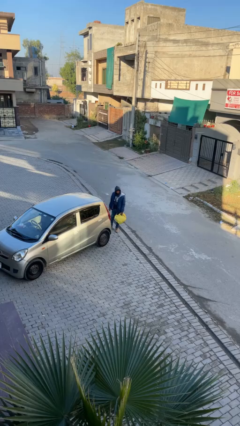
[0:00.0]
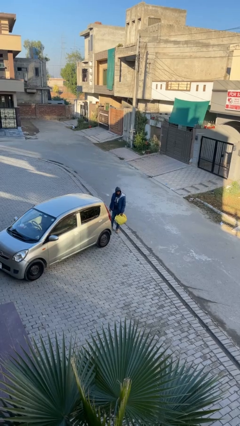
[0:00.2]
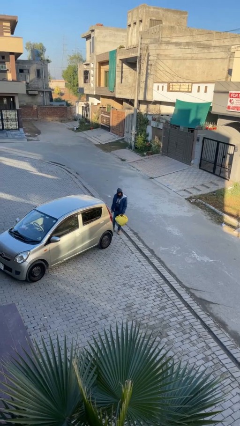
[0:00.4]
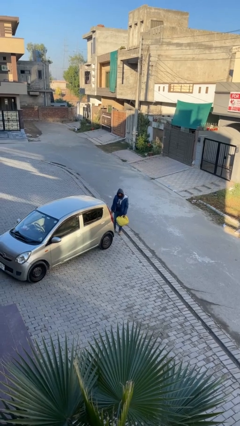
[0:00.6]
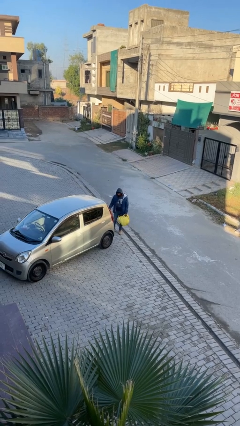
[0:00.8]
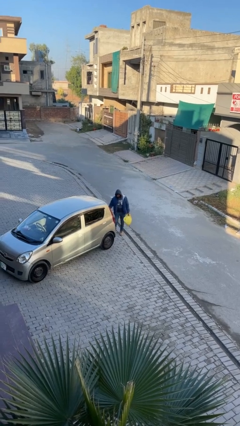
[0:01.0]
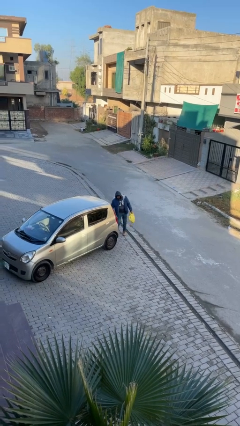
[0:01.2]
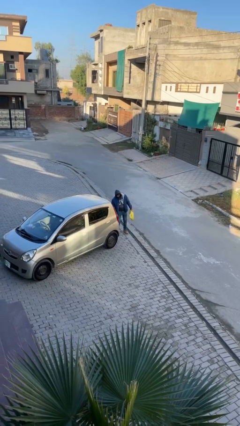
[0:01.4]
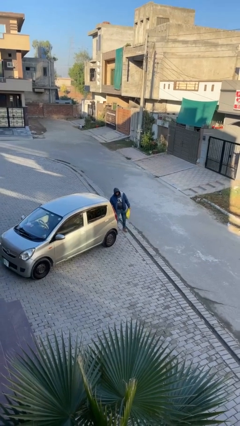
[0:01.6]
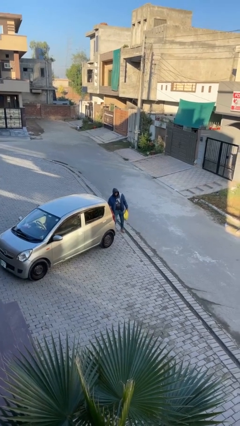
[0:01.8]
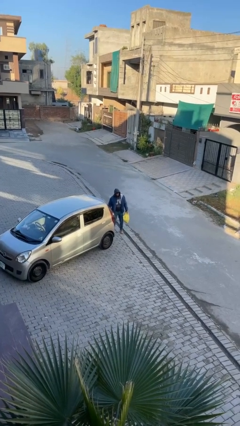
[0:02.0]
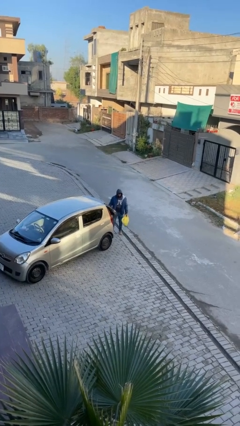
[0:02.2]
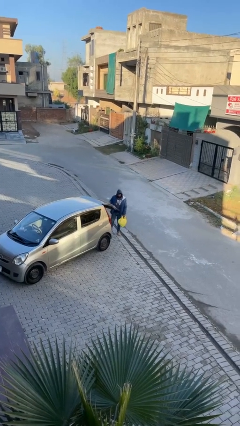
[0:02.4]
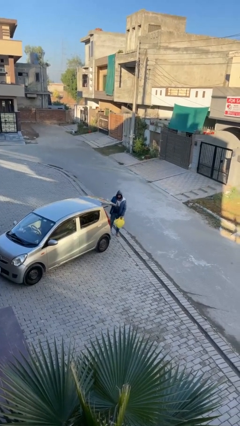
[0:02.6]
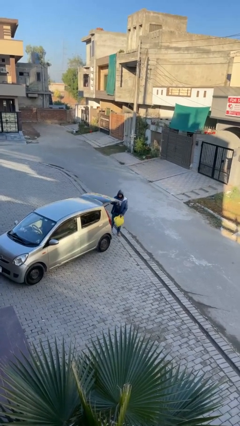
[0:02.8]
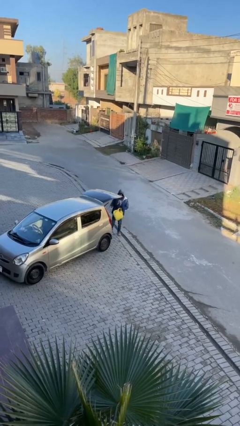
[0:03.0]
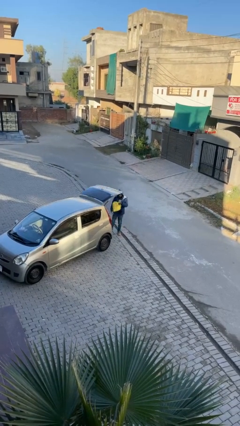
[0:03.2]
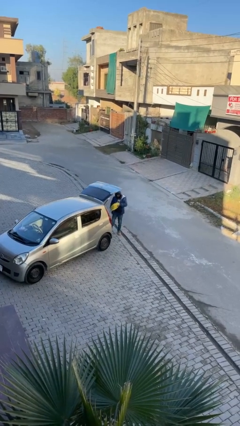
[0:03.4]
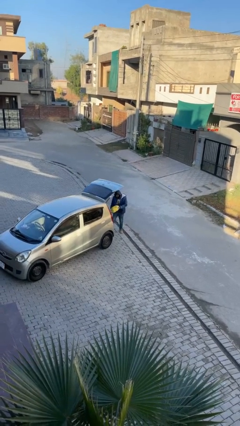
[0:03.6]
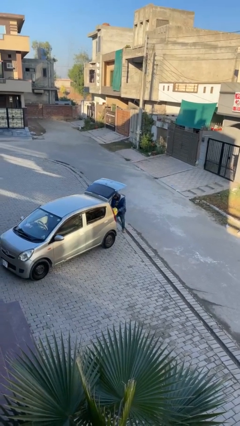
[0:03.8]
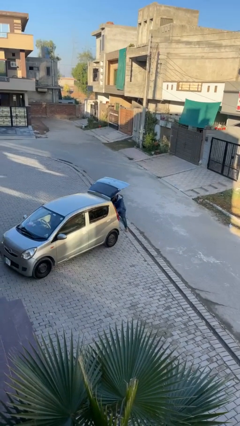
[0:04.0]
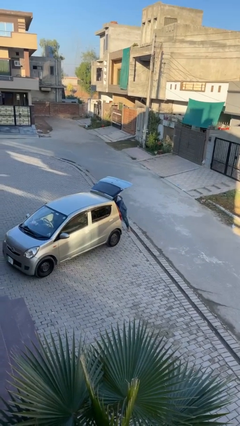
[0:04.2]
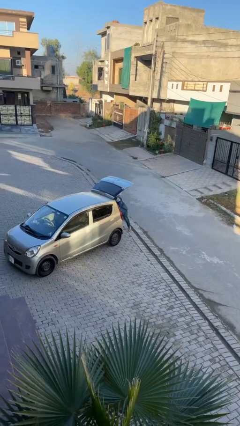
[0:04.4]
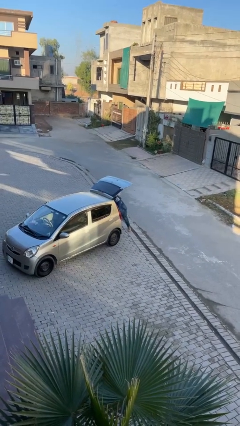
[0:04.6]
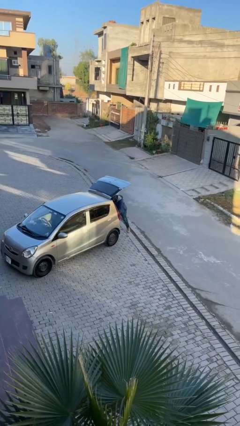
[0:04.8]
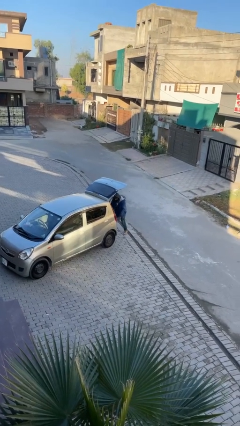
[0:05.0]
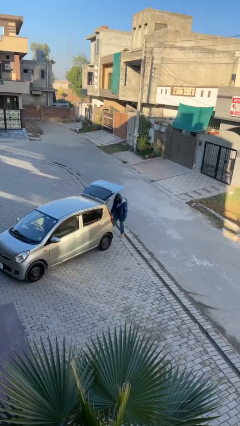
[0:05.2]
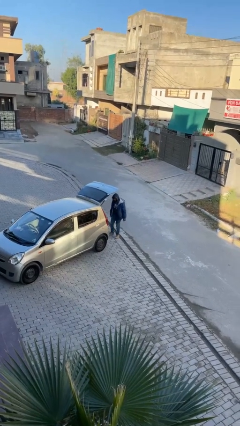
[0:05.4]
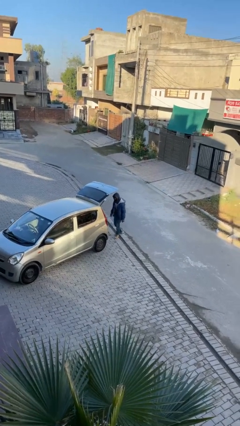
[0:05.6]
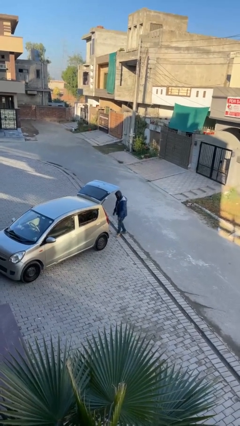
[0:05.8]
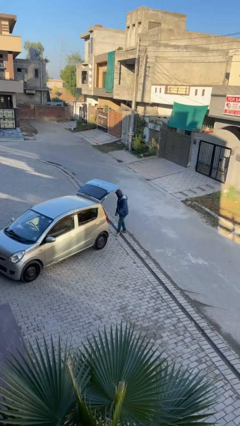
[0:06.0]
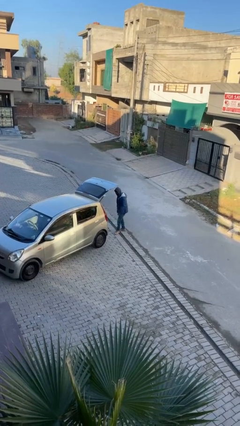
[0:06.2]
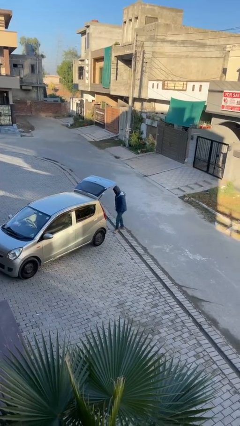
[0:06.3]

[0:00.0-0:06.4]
person loads car

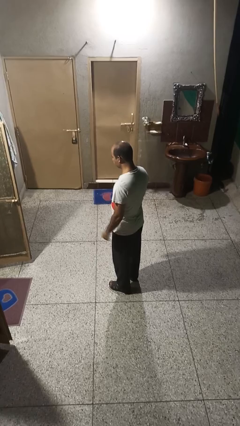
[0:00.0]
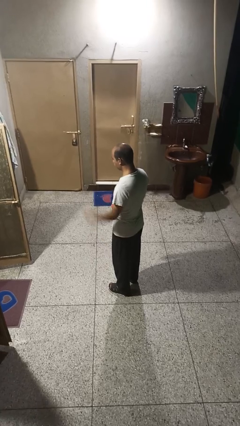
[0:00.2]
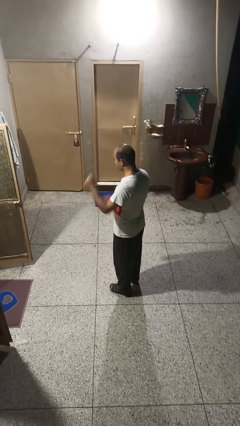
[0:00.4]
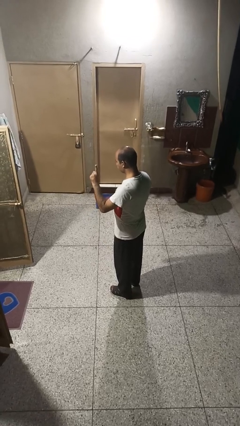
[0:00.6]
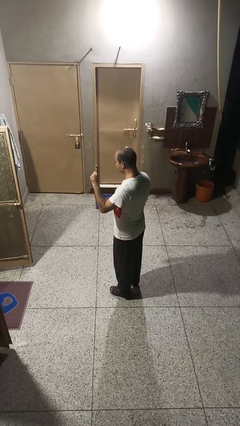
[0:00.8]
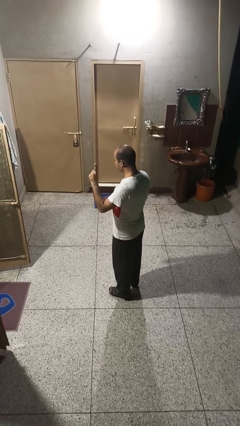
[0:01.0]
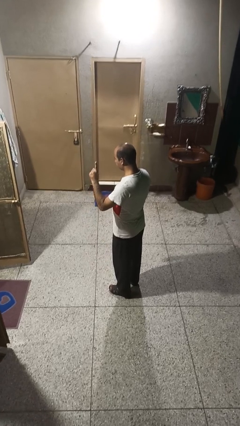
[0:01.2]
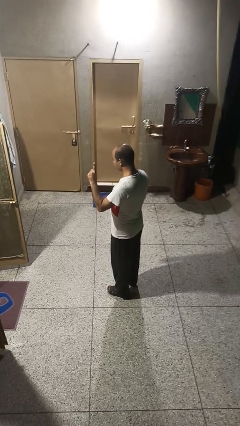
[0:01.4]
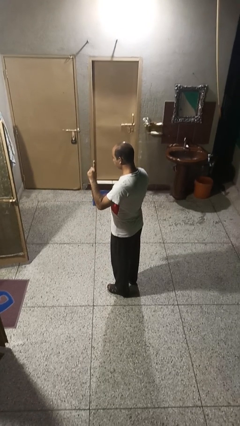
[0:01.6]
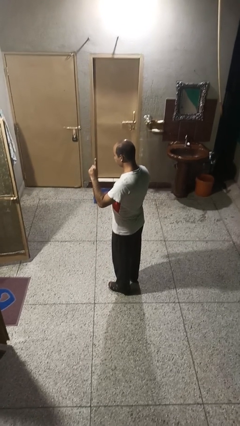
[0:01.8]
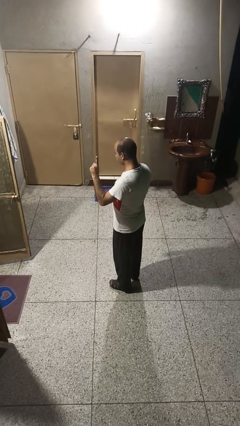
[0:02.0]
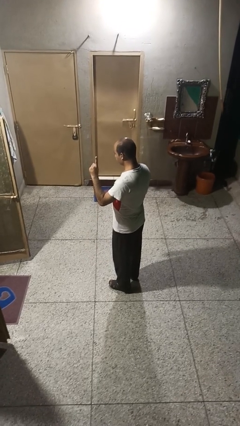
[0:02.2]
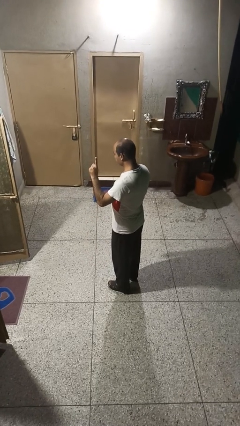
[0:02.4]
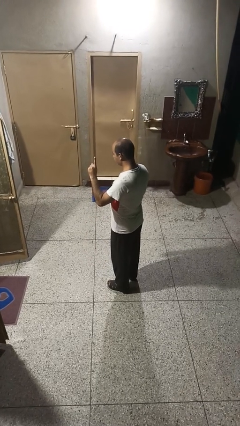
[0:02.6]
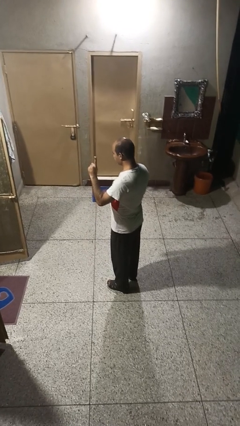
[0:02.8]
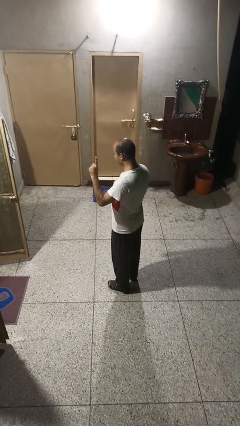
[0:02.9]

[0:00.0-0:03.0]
person gestures number one

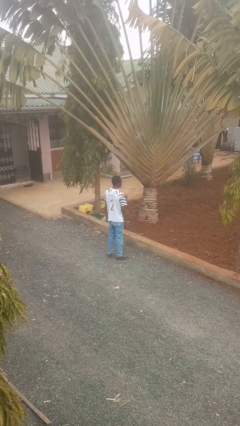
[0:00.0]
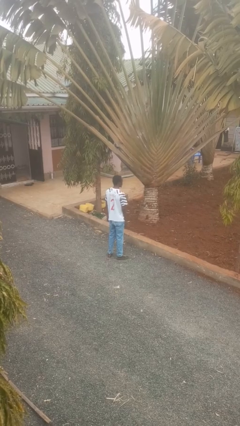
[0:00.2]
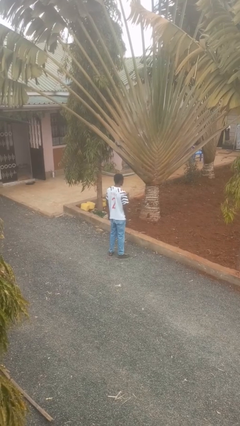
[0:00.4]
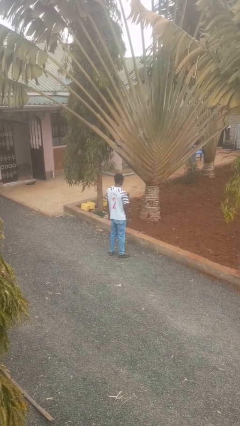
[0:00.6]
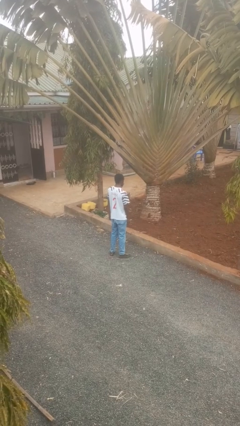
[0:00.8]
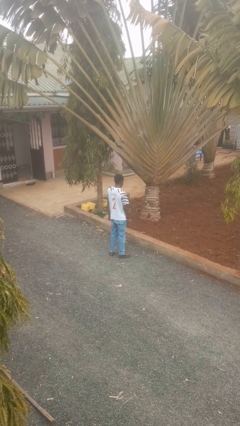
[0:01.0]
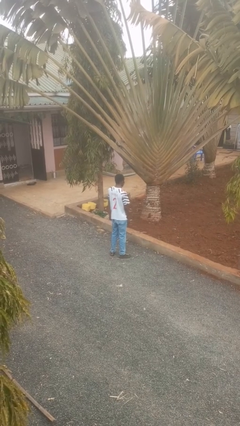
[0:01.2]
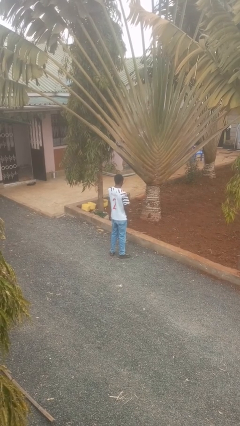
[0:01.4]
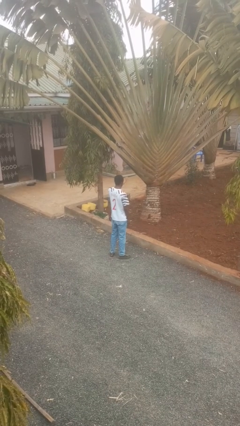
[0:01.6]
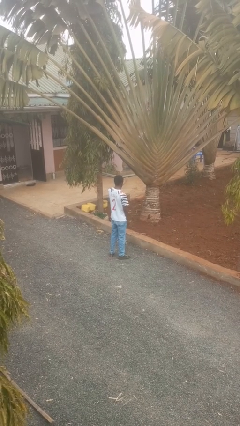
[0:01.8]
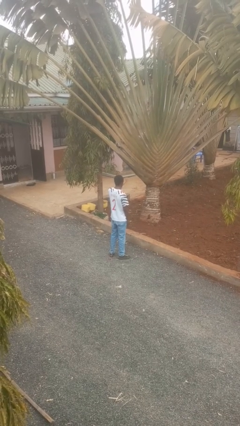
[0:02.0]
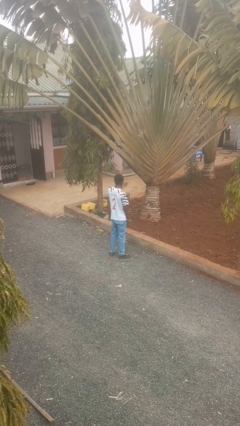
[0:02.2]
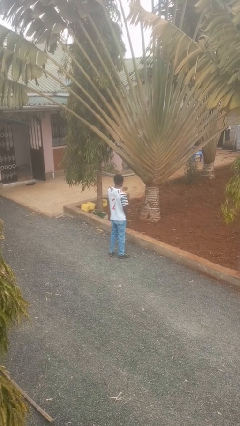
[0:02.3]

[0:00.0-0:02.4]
person gestures blow kiss

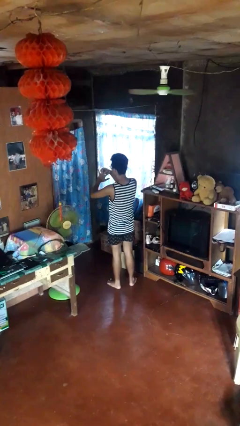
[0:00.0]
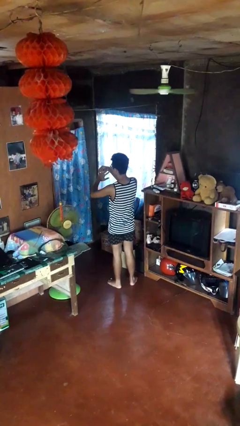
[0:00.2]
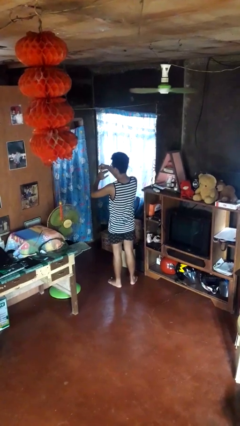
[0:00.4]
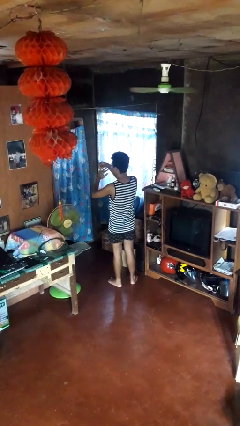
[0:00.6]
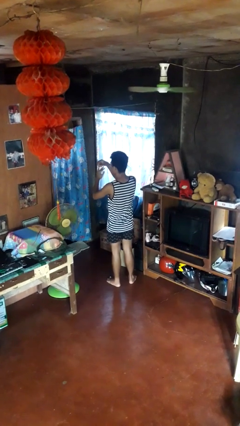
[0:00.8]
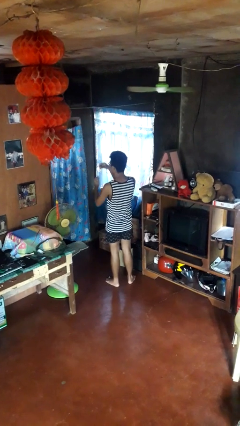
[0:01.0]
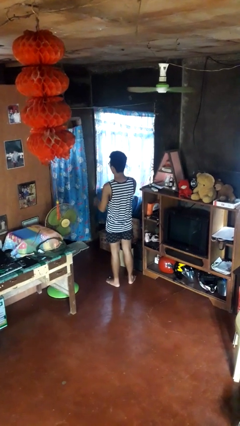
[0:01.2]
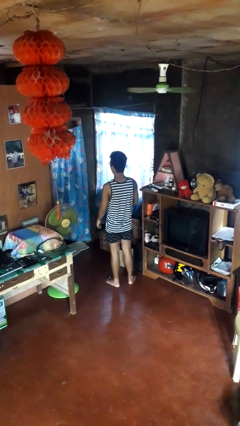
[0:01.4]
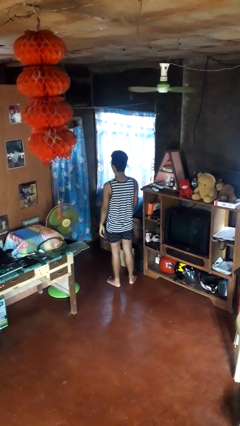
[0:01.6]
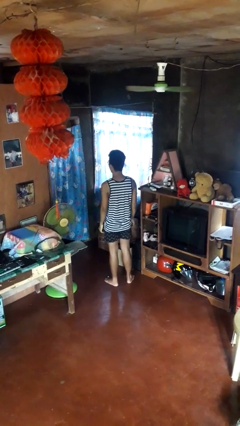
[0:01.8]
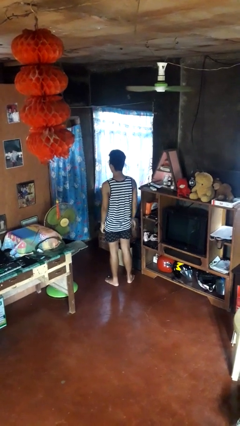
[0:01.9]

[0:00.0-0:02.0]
person takes off ring

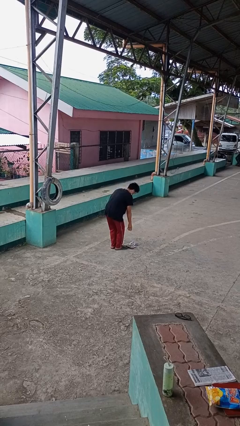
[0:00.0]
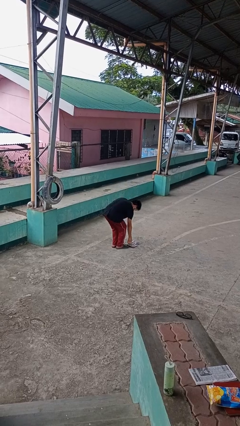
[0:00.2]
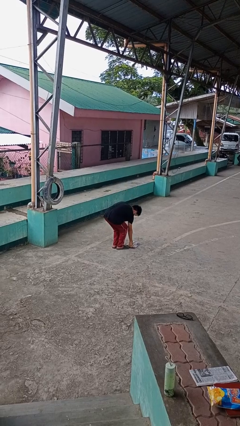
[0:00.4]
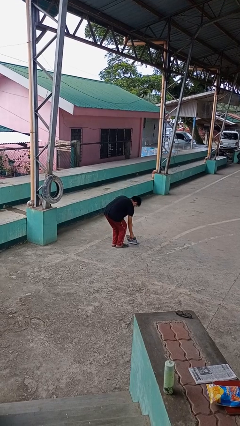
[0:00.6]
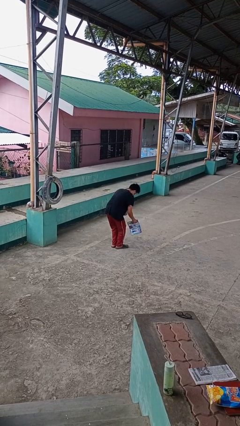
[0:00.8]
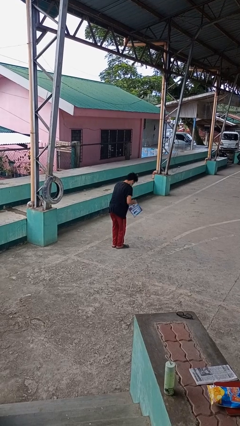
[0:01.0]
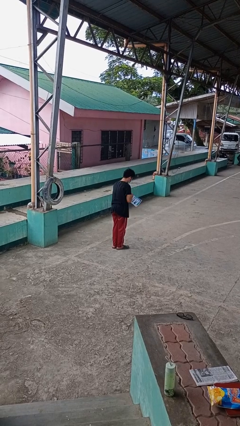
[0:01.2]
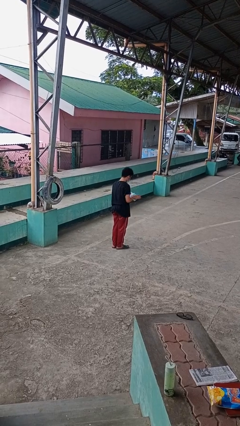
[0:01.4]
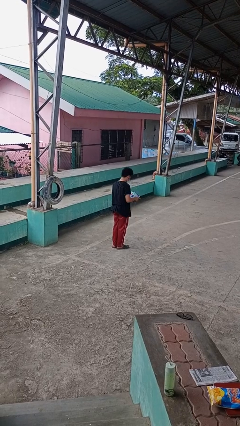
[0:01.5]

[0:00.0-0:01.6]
person picks up object from floor

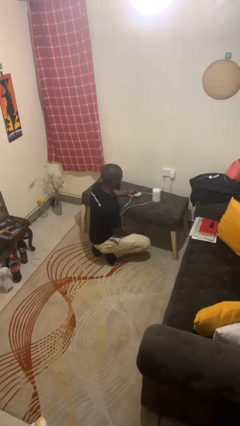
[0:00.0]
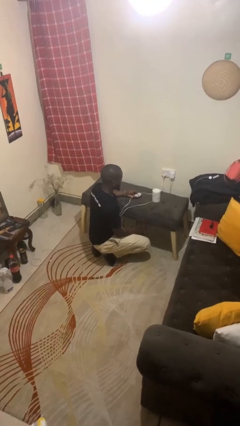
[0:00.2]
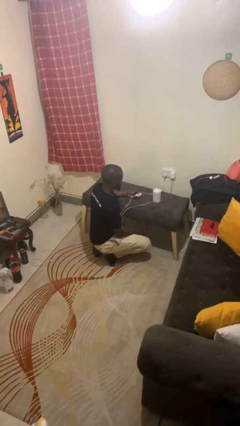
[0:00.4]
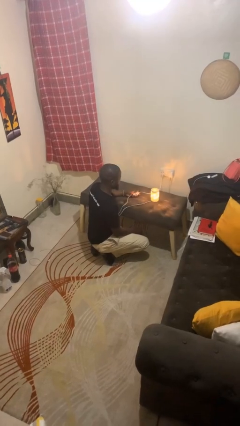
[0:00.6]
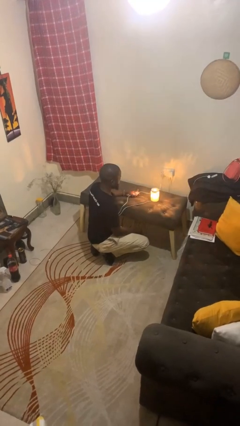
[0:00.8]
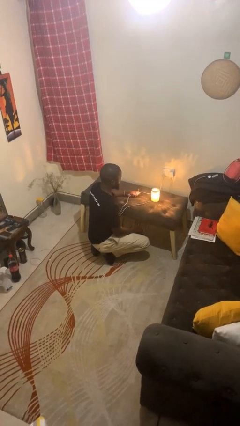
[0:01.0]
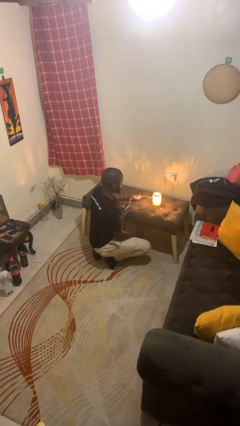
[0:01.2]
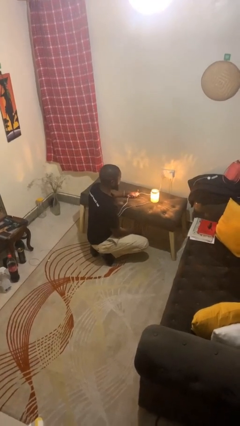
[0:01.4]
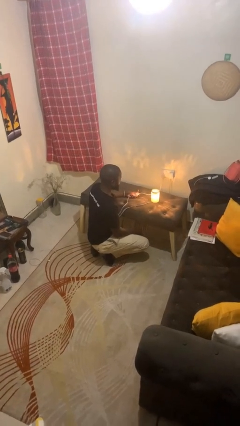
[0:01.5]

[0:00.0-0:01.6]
person turns on lamp
